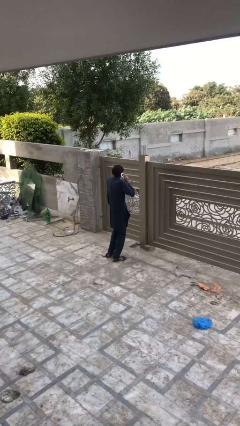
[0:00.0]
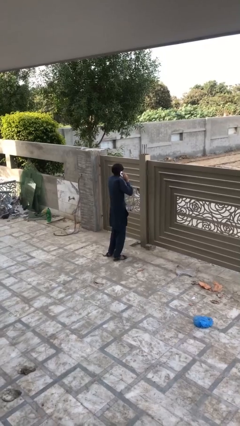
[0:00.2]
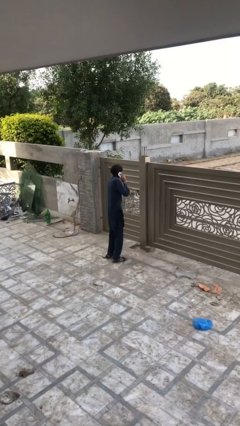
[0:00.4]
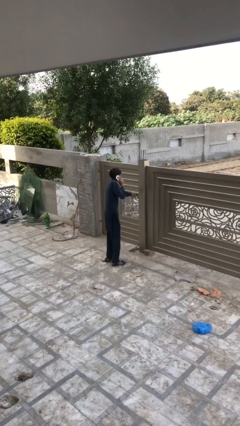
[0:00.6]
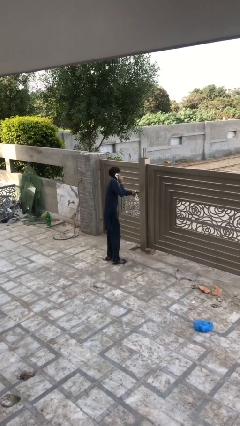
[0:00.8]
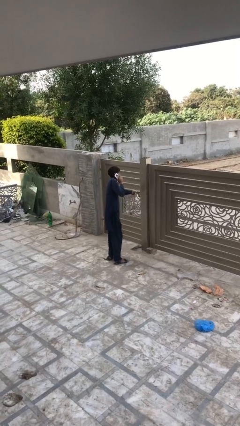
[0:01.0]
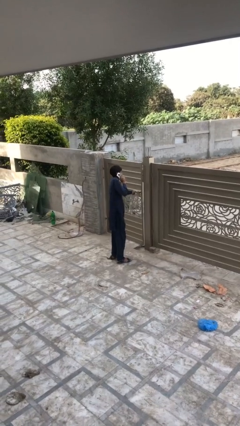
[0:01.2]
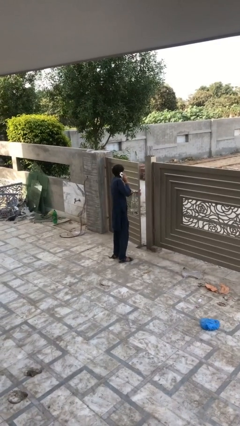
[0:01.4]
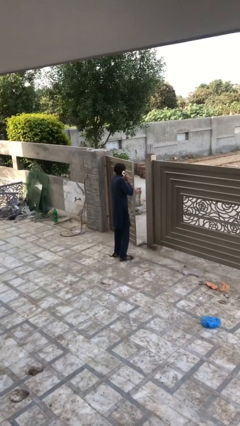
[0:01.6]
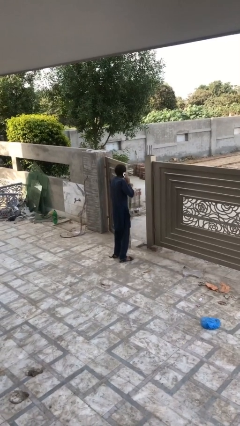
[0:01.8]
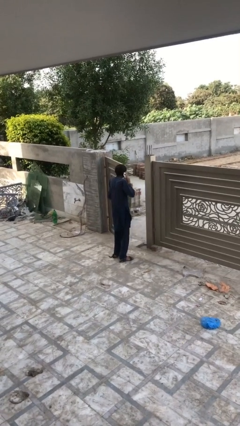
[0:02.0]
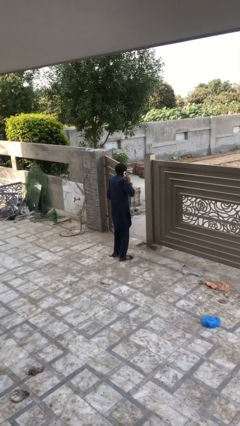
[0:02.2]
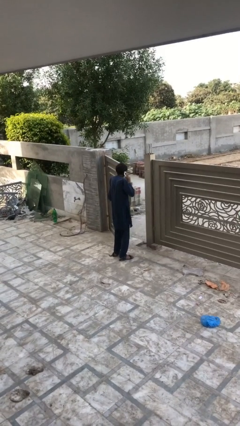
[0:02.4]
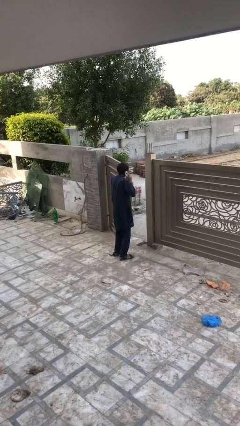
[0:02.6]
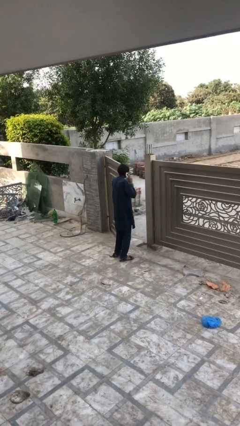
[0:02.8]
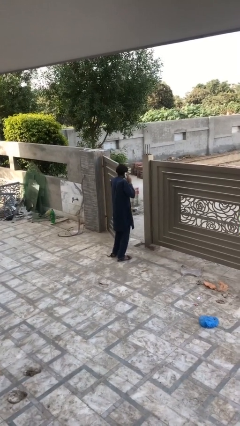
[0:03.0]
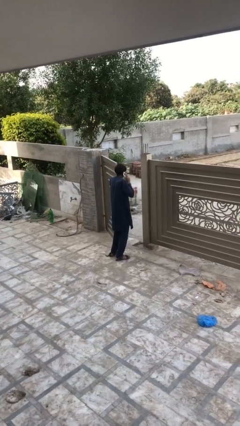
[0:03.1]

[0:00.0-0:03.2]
person opens facility door

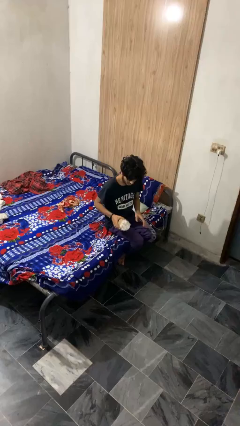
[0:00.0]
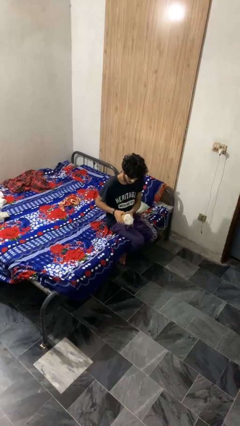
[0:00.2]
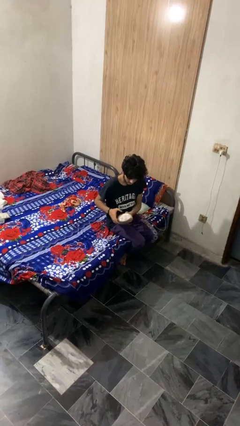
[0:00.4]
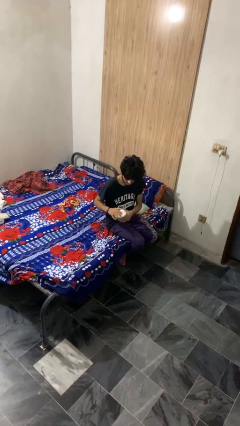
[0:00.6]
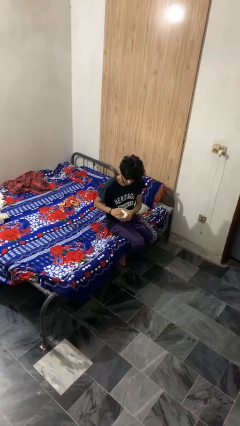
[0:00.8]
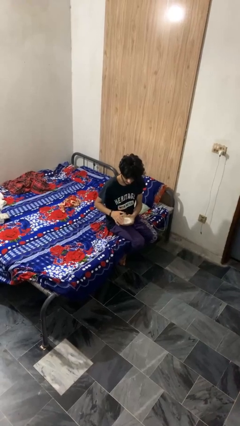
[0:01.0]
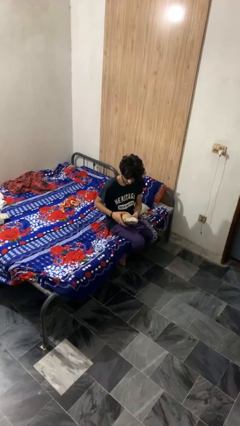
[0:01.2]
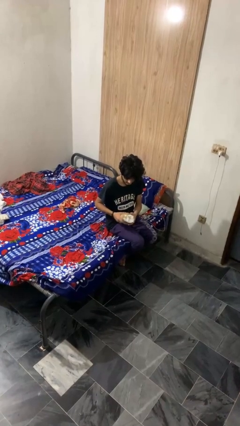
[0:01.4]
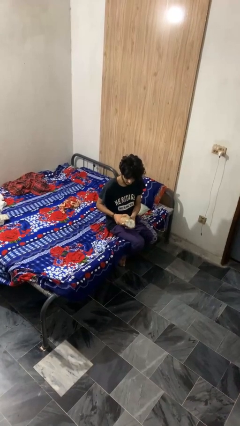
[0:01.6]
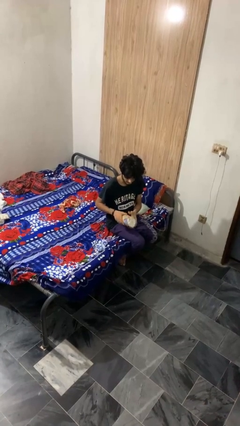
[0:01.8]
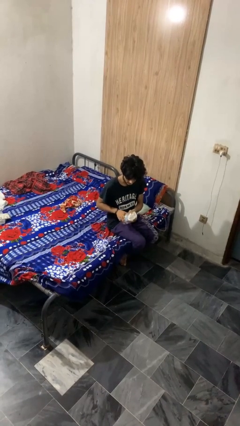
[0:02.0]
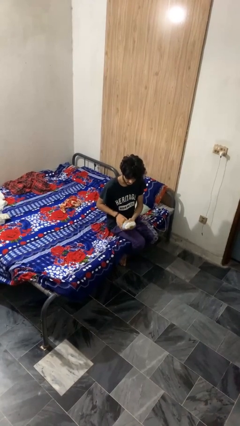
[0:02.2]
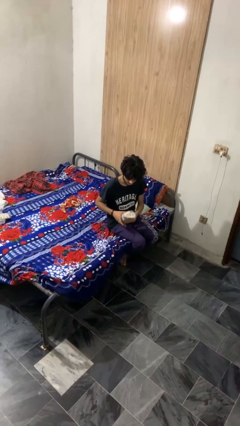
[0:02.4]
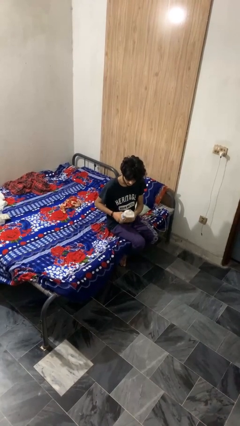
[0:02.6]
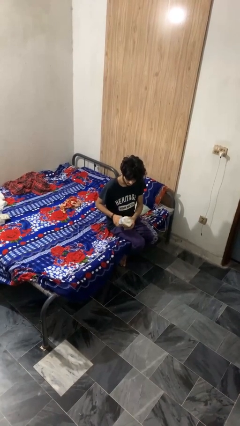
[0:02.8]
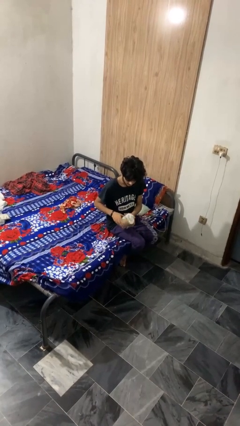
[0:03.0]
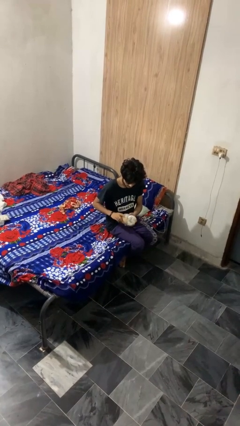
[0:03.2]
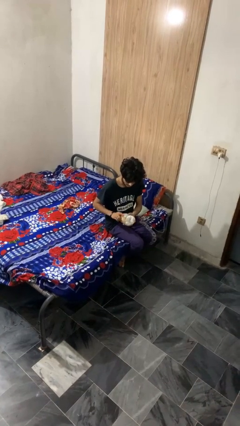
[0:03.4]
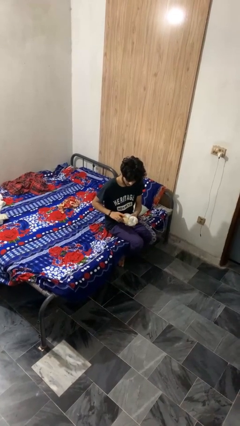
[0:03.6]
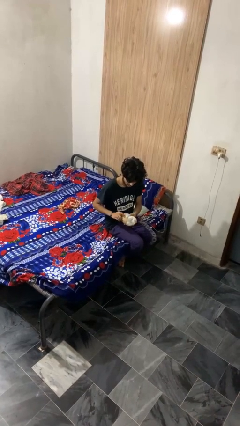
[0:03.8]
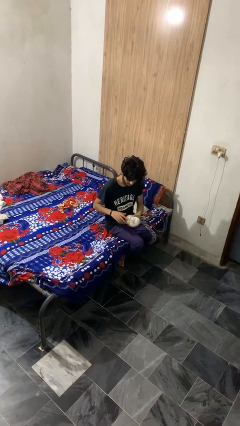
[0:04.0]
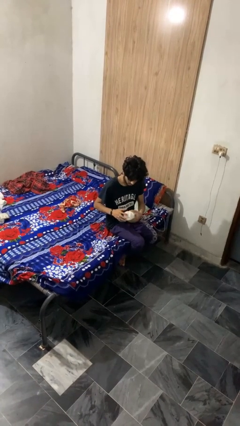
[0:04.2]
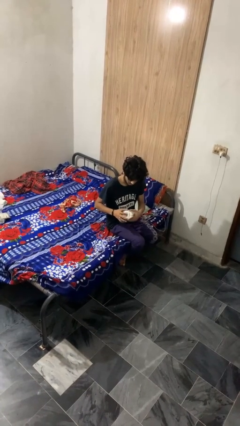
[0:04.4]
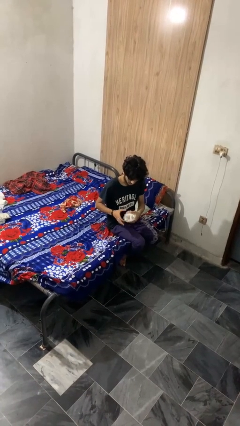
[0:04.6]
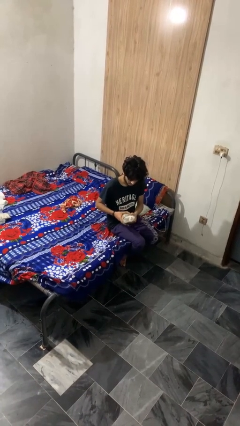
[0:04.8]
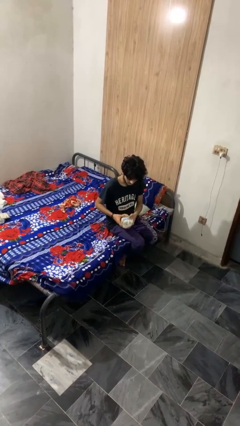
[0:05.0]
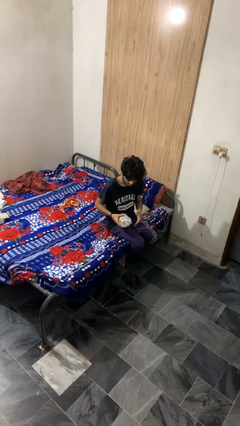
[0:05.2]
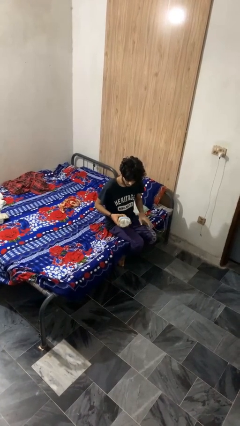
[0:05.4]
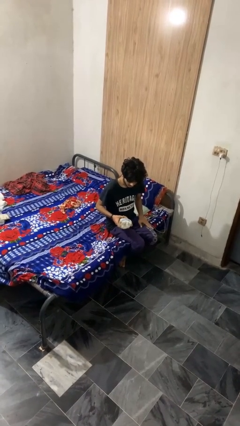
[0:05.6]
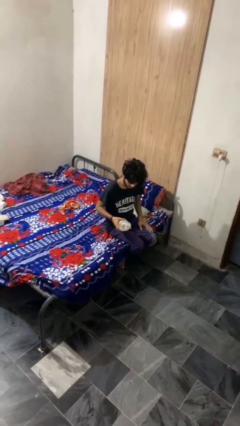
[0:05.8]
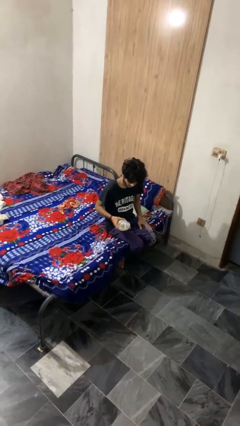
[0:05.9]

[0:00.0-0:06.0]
person squeezes object

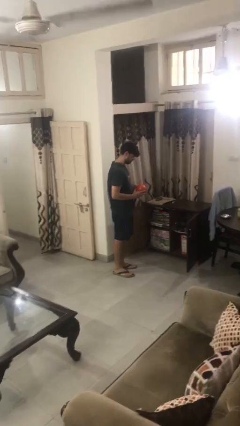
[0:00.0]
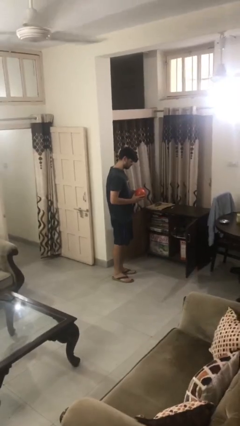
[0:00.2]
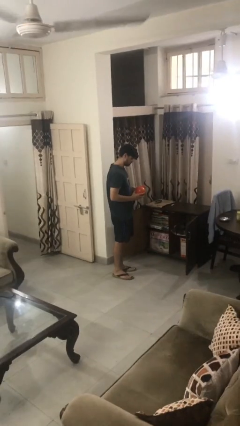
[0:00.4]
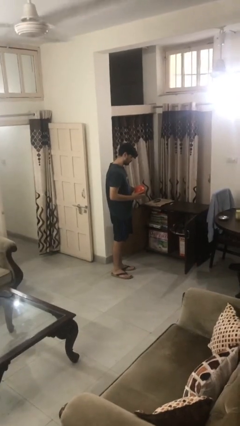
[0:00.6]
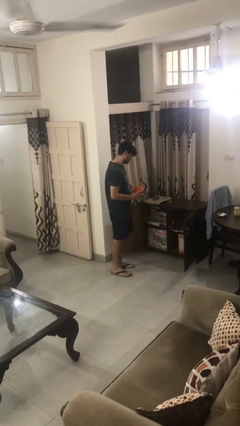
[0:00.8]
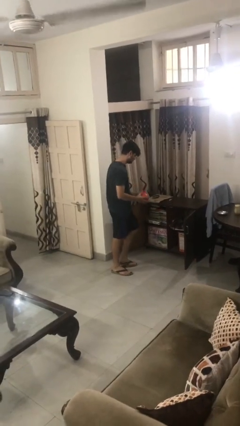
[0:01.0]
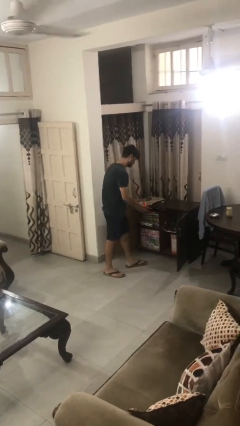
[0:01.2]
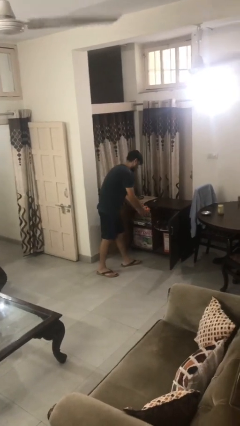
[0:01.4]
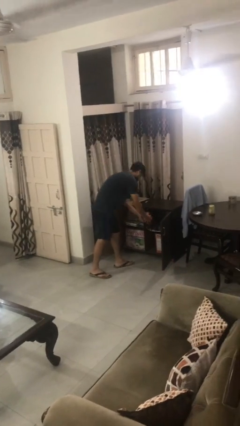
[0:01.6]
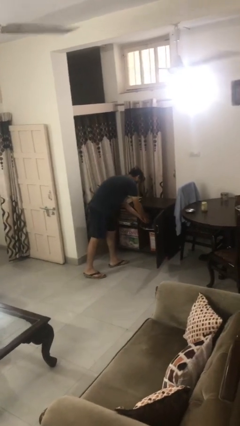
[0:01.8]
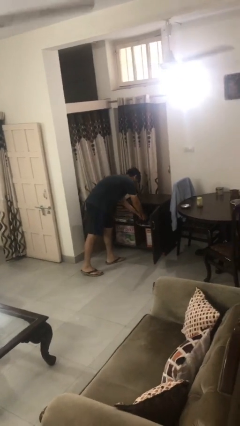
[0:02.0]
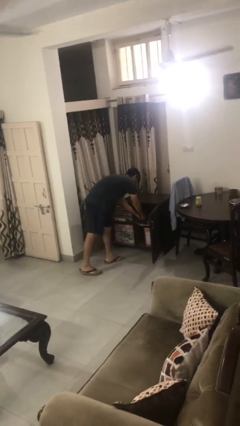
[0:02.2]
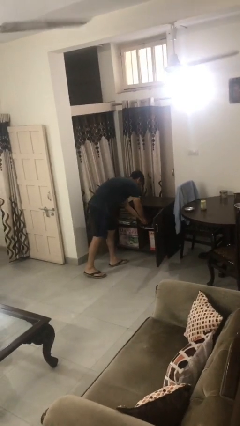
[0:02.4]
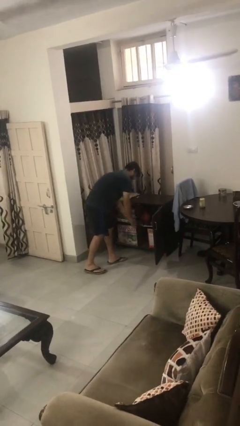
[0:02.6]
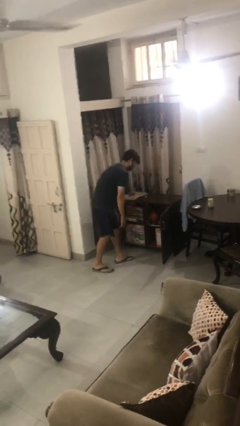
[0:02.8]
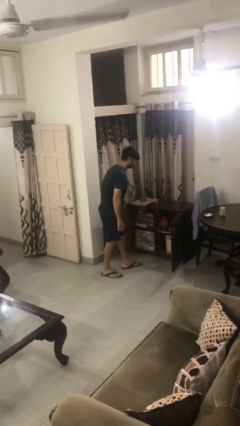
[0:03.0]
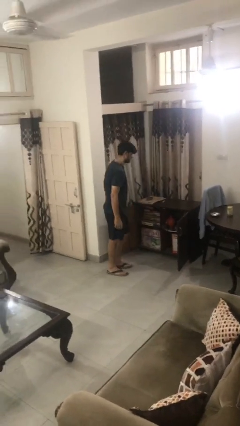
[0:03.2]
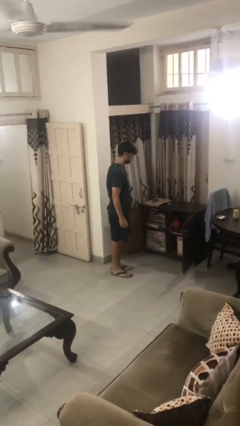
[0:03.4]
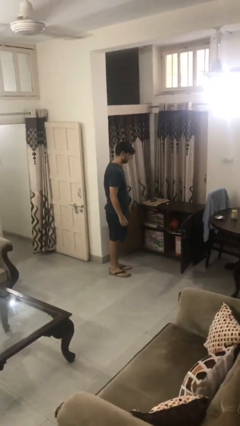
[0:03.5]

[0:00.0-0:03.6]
person puts down object into cabinet

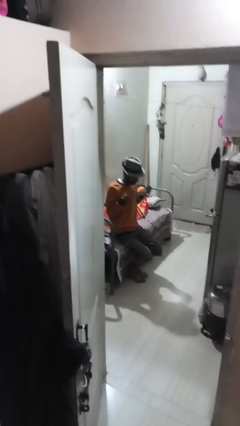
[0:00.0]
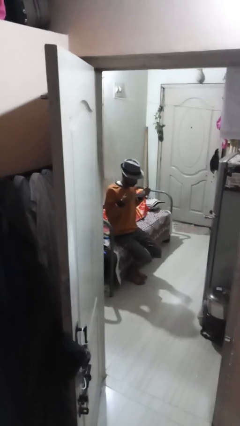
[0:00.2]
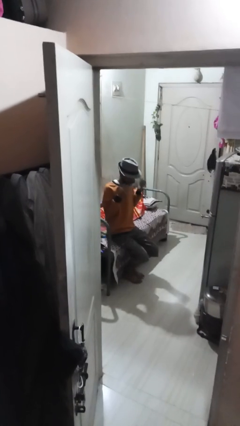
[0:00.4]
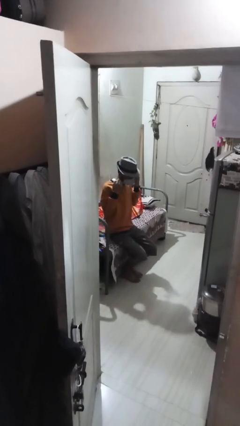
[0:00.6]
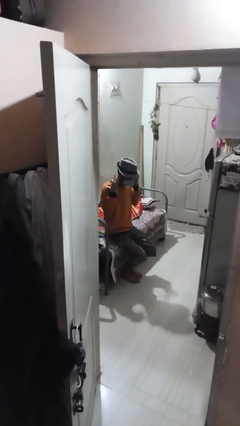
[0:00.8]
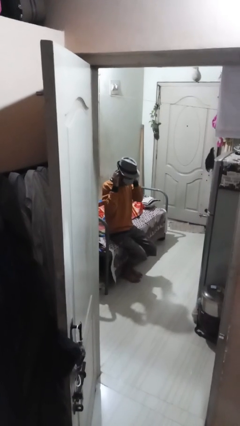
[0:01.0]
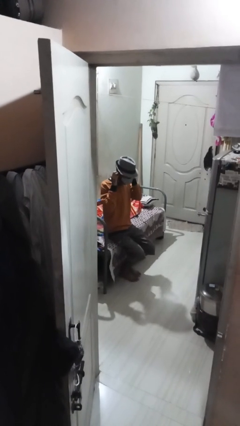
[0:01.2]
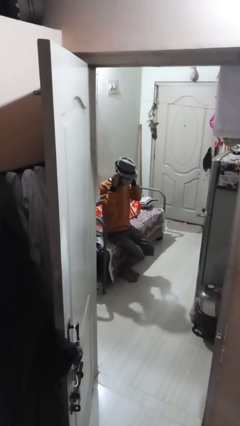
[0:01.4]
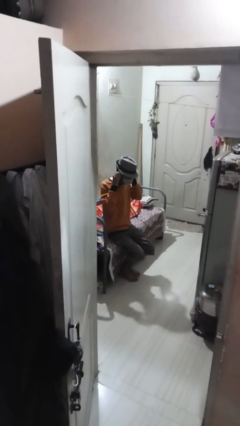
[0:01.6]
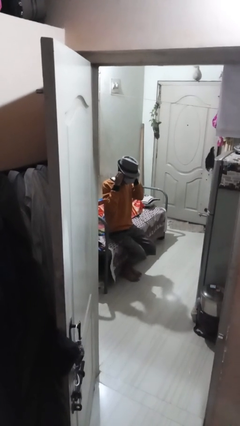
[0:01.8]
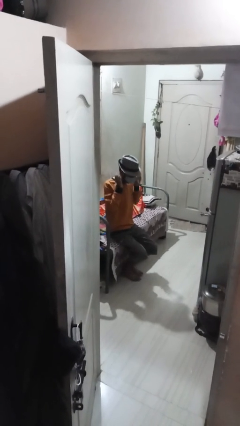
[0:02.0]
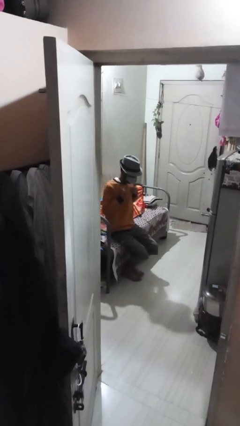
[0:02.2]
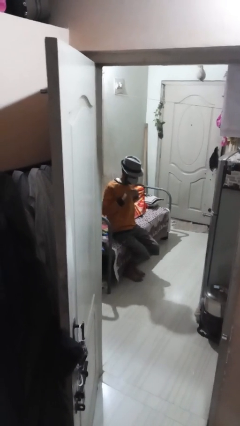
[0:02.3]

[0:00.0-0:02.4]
person puts on facemask

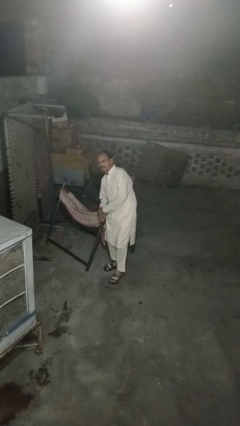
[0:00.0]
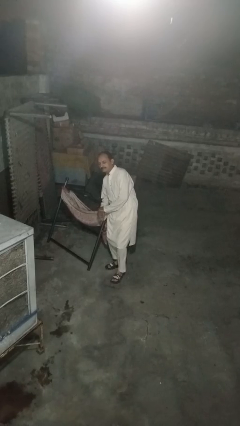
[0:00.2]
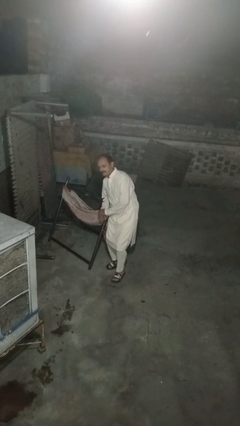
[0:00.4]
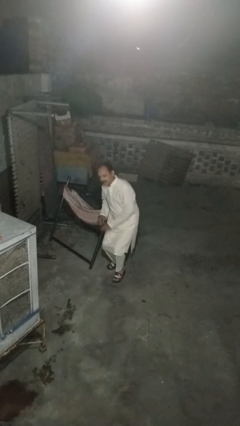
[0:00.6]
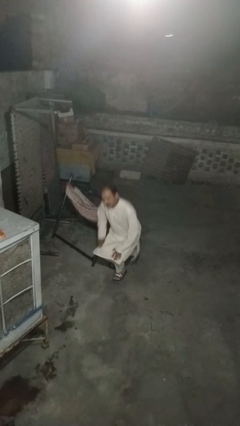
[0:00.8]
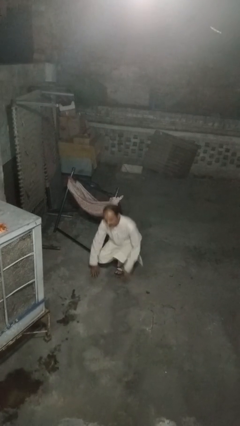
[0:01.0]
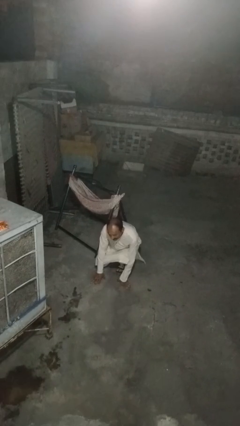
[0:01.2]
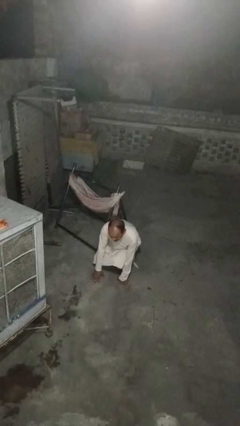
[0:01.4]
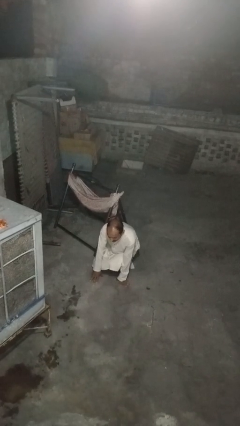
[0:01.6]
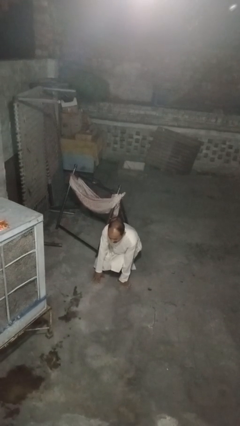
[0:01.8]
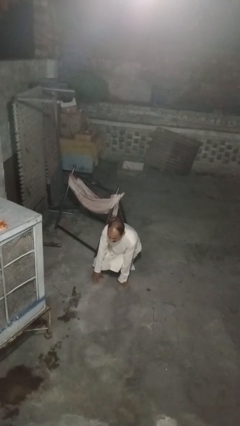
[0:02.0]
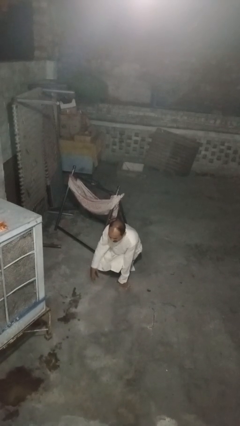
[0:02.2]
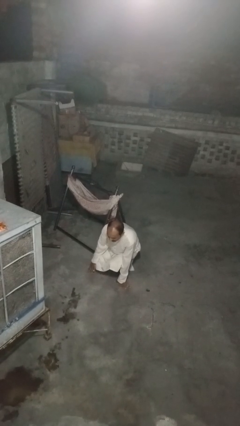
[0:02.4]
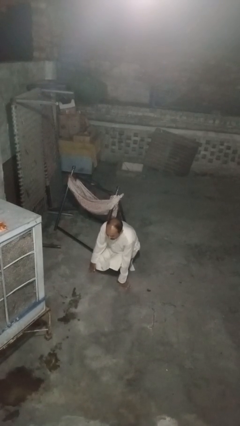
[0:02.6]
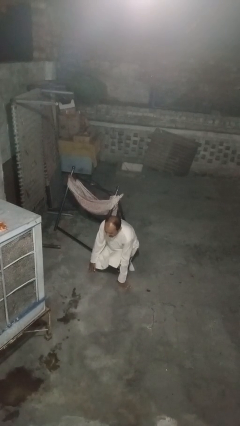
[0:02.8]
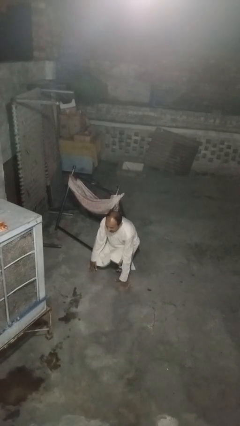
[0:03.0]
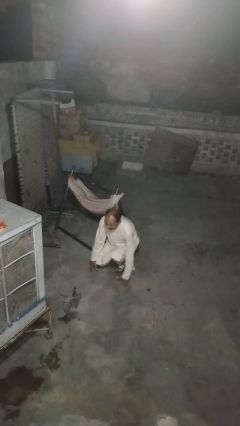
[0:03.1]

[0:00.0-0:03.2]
person falls while standing
